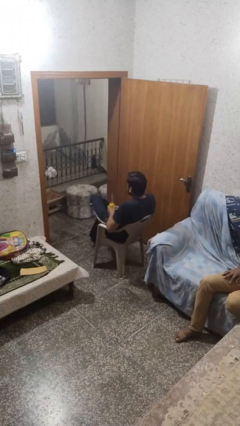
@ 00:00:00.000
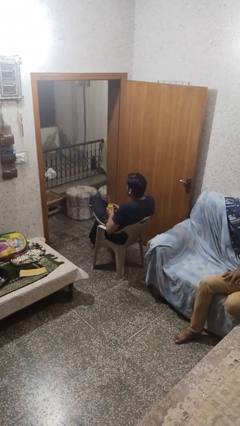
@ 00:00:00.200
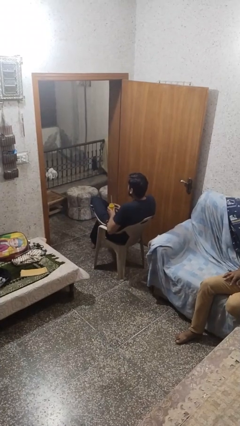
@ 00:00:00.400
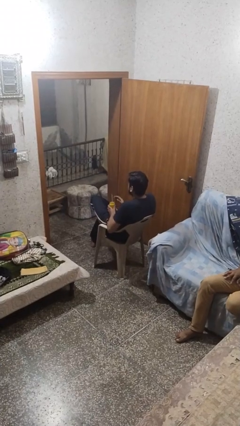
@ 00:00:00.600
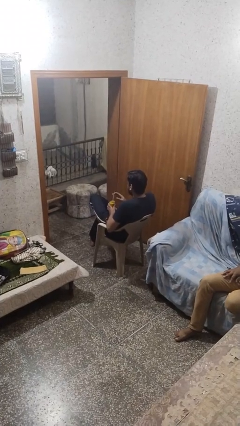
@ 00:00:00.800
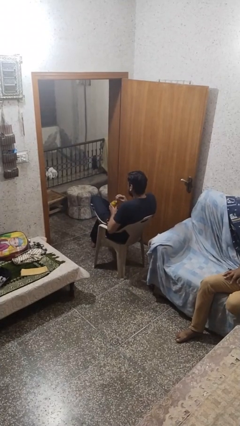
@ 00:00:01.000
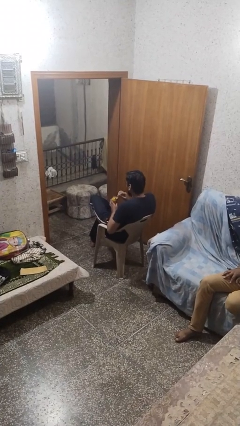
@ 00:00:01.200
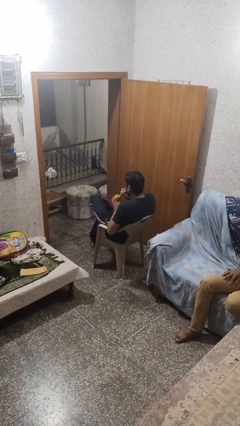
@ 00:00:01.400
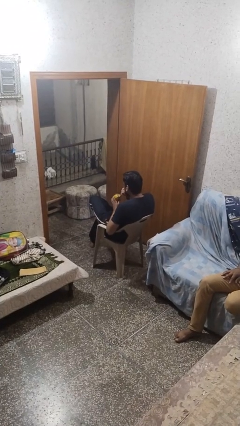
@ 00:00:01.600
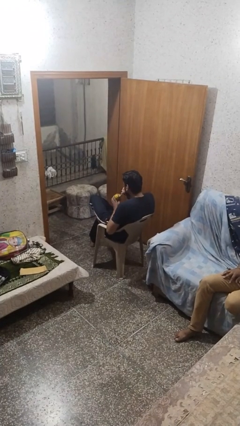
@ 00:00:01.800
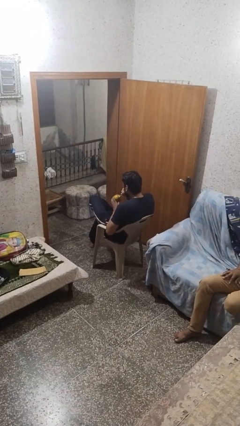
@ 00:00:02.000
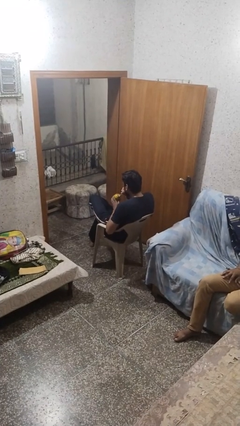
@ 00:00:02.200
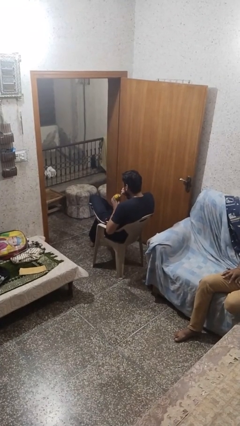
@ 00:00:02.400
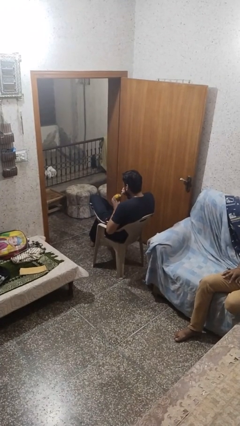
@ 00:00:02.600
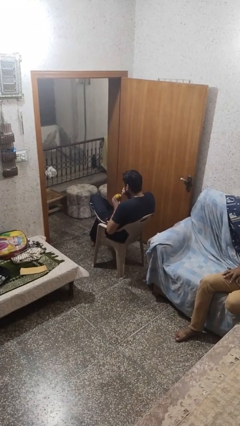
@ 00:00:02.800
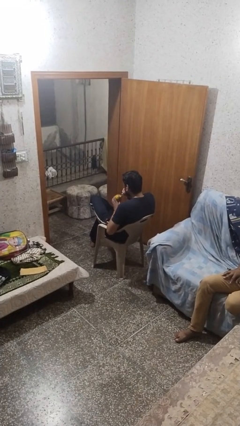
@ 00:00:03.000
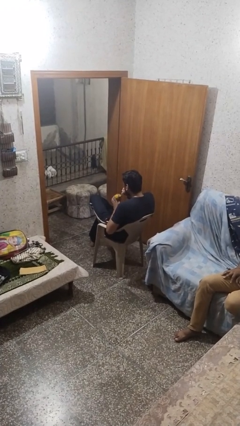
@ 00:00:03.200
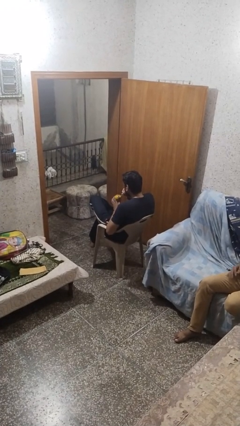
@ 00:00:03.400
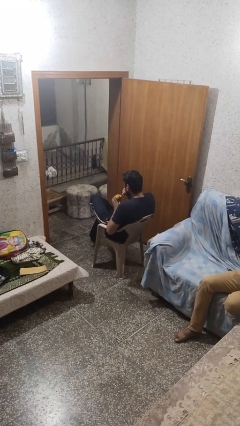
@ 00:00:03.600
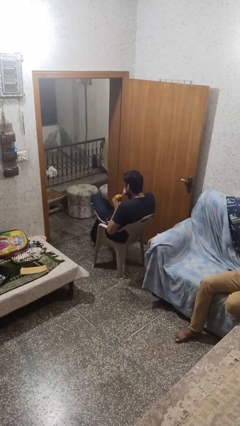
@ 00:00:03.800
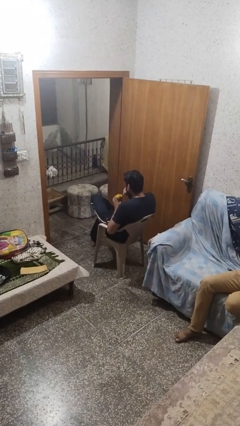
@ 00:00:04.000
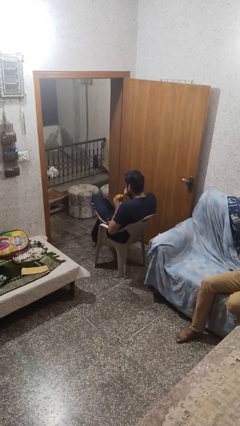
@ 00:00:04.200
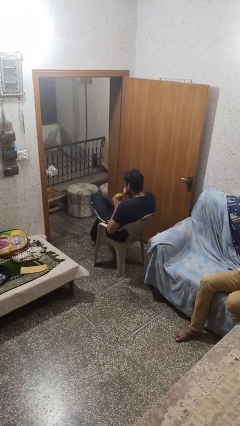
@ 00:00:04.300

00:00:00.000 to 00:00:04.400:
person drinks from straw

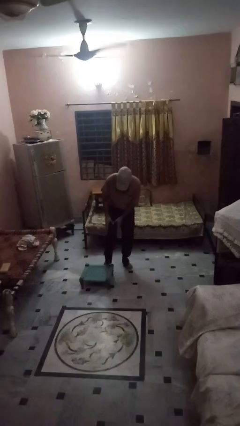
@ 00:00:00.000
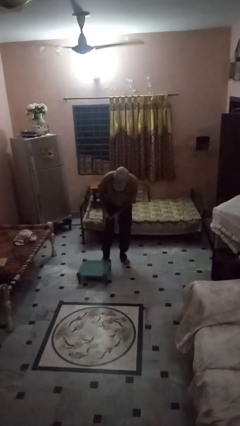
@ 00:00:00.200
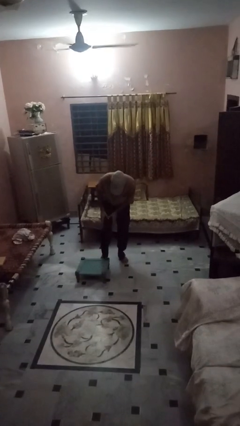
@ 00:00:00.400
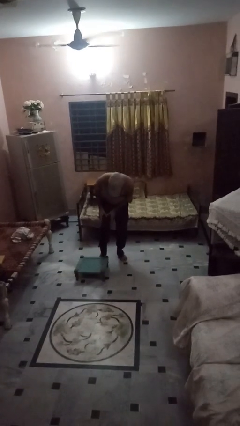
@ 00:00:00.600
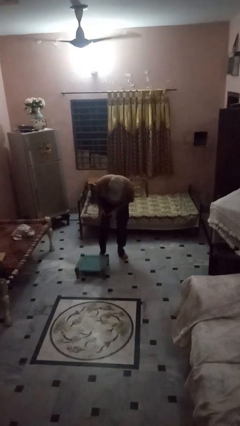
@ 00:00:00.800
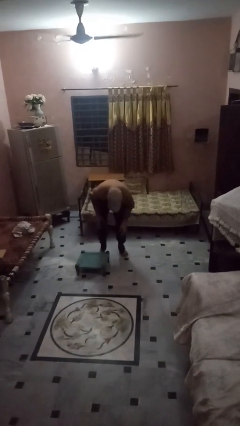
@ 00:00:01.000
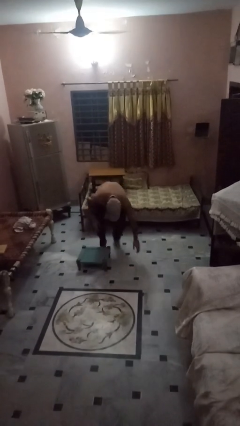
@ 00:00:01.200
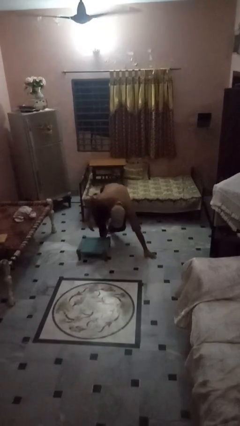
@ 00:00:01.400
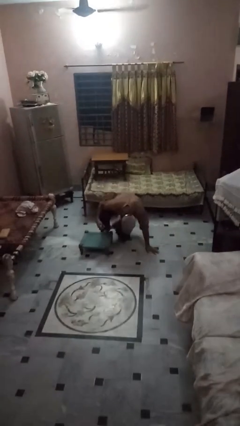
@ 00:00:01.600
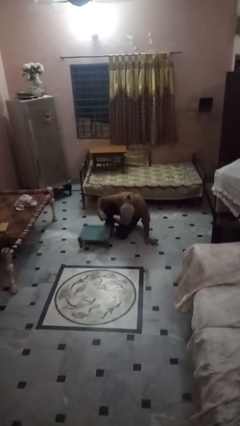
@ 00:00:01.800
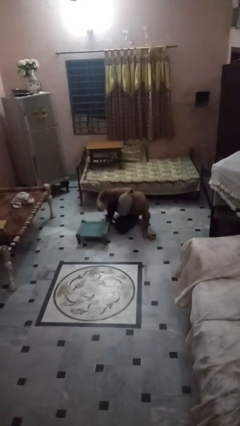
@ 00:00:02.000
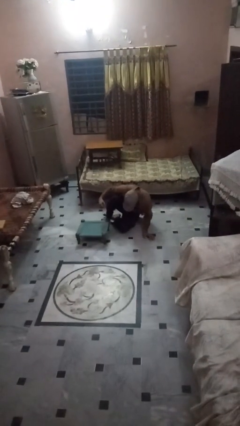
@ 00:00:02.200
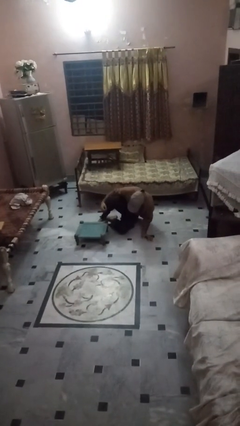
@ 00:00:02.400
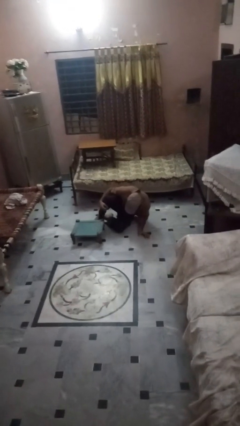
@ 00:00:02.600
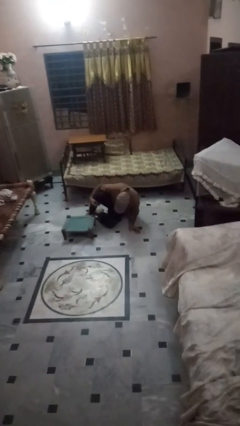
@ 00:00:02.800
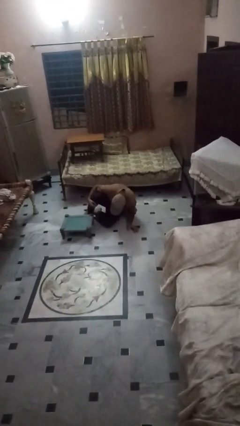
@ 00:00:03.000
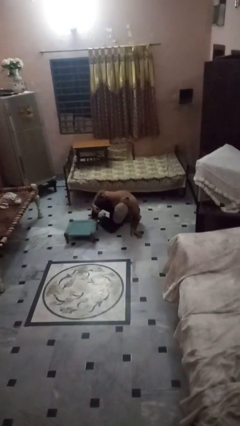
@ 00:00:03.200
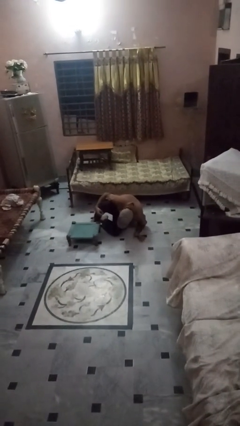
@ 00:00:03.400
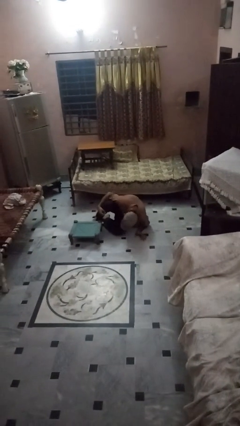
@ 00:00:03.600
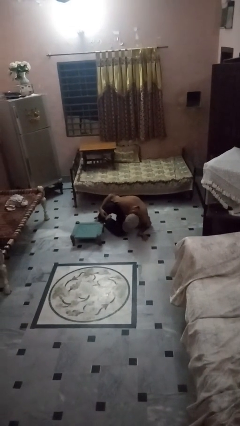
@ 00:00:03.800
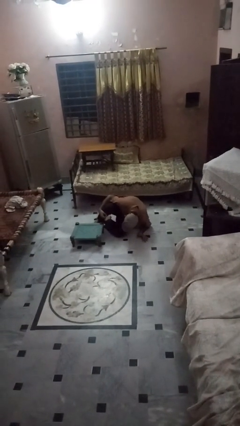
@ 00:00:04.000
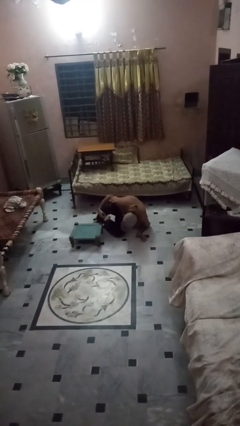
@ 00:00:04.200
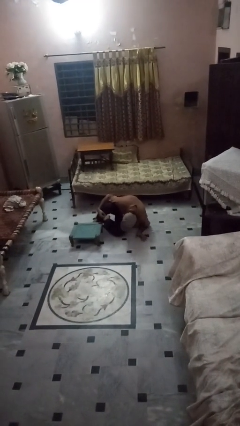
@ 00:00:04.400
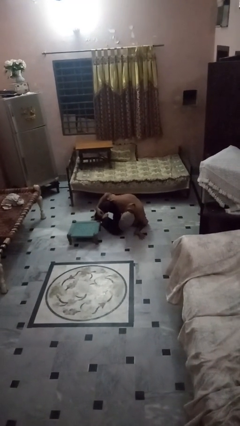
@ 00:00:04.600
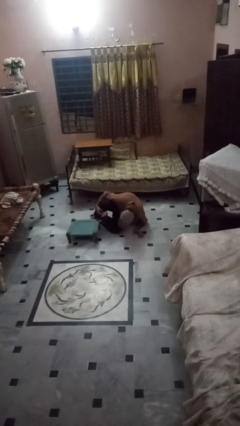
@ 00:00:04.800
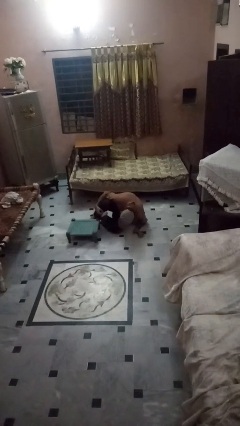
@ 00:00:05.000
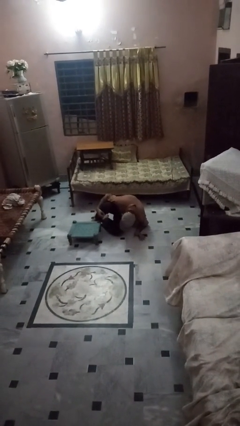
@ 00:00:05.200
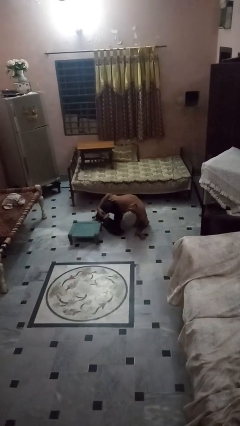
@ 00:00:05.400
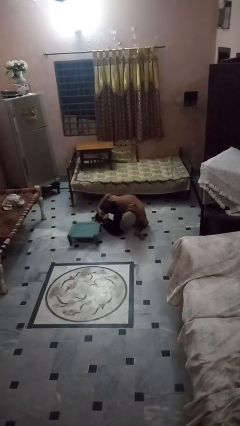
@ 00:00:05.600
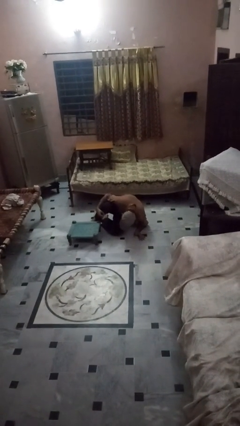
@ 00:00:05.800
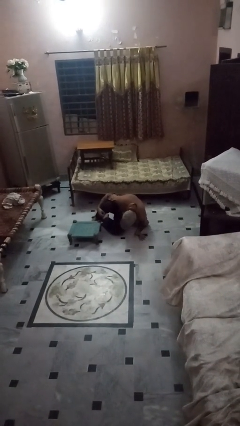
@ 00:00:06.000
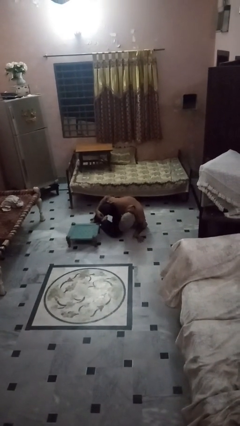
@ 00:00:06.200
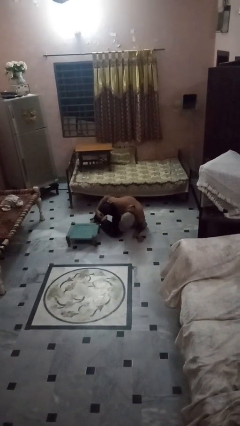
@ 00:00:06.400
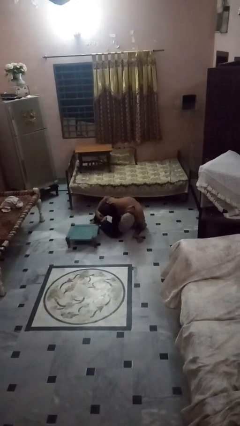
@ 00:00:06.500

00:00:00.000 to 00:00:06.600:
person lies down on floor

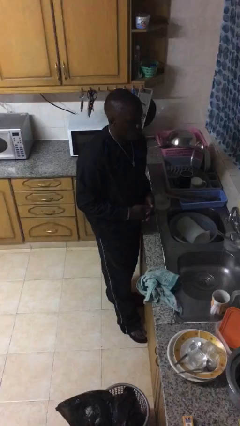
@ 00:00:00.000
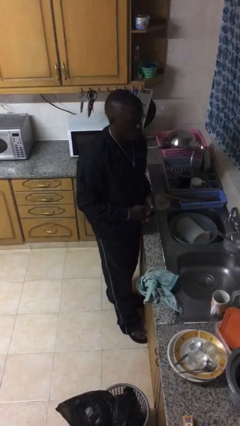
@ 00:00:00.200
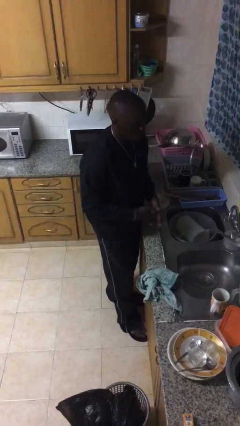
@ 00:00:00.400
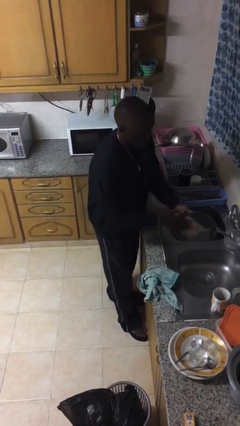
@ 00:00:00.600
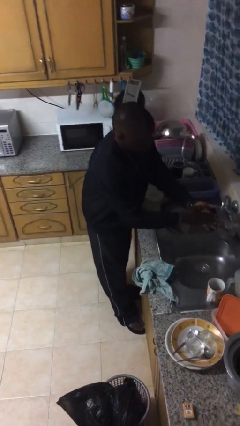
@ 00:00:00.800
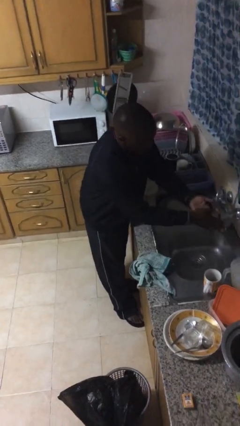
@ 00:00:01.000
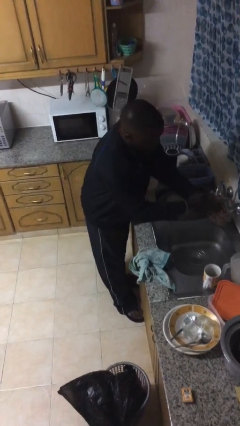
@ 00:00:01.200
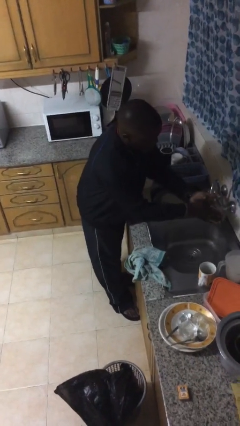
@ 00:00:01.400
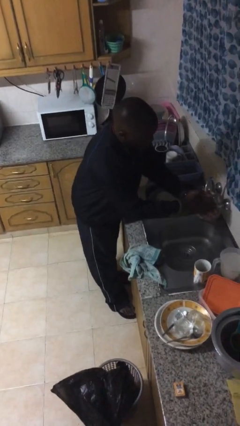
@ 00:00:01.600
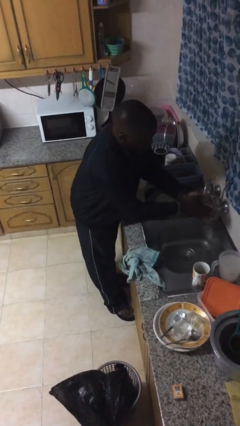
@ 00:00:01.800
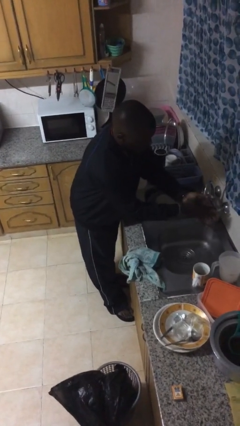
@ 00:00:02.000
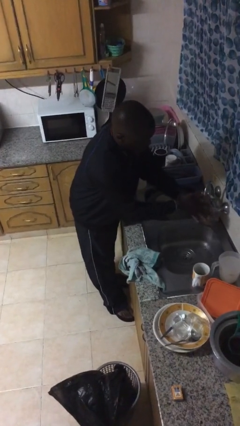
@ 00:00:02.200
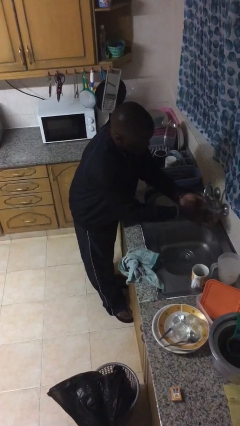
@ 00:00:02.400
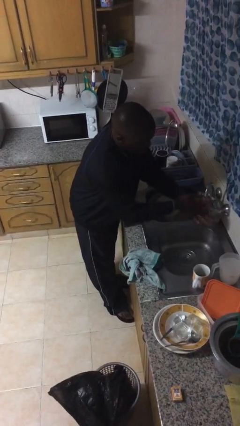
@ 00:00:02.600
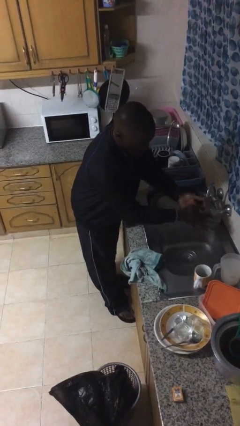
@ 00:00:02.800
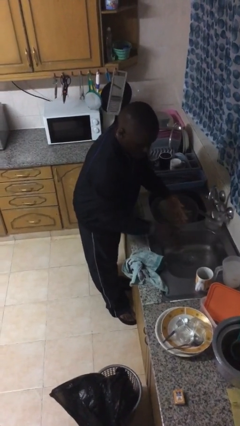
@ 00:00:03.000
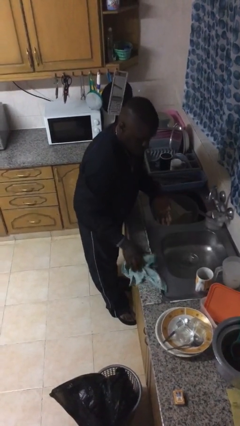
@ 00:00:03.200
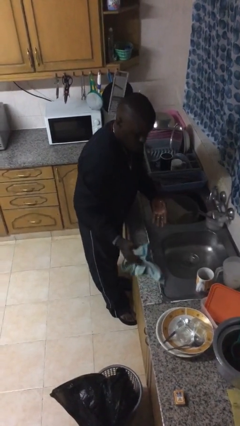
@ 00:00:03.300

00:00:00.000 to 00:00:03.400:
person washes hands

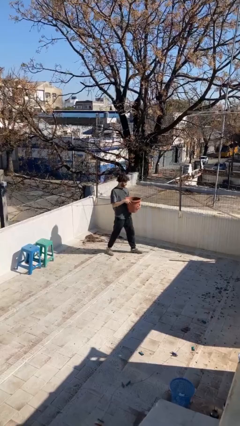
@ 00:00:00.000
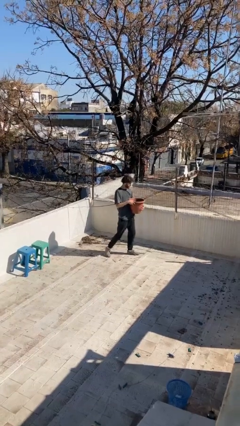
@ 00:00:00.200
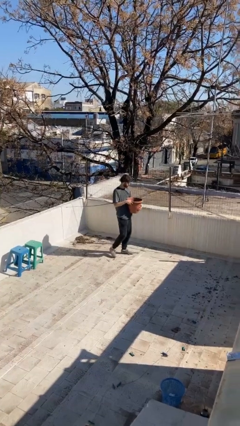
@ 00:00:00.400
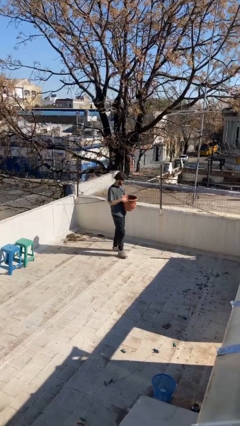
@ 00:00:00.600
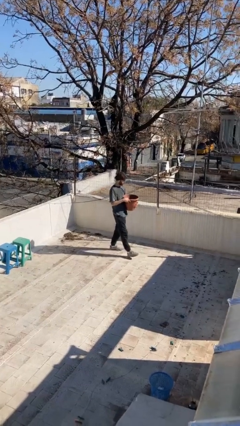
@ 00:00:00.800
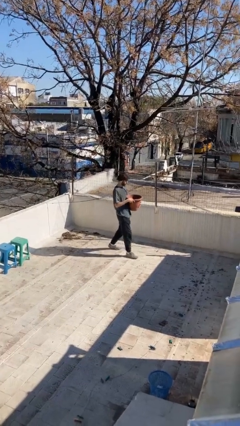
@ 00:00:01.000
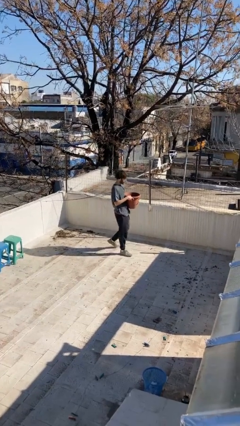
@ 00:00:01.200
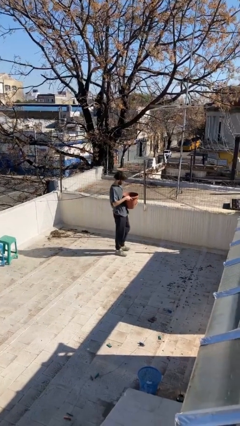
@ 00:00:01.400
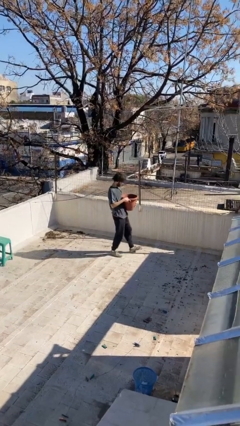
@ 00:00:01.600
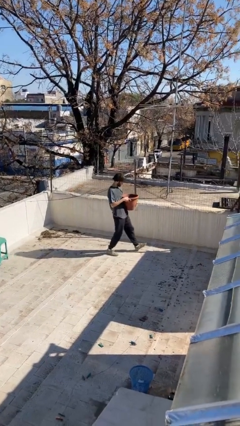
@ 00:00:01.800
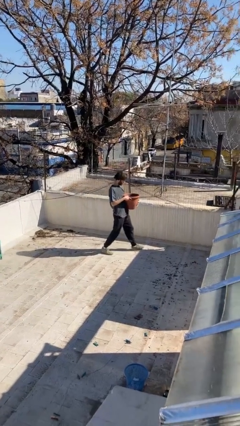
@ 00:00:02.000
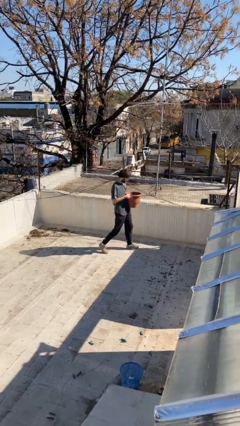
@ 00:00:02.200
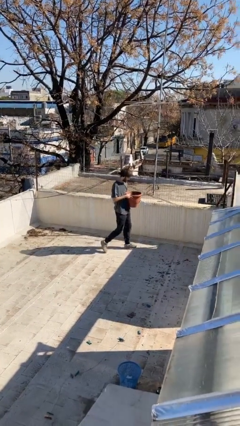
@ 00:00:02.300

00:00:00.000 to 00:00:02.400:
person carries heavy object

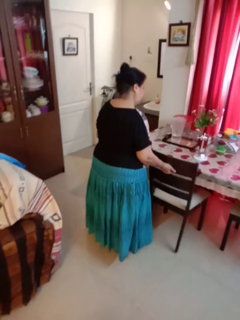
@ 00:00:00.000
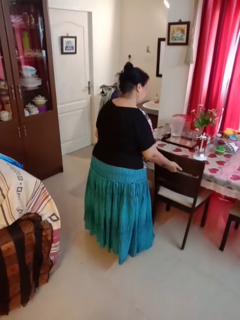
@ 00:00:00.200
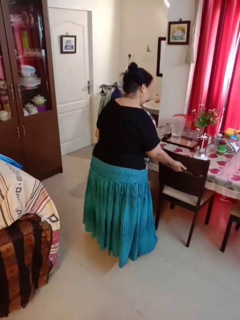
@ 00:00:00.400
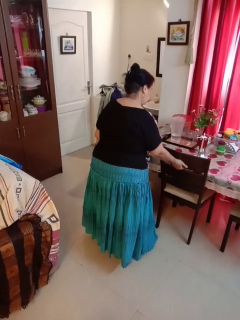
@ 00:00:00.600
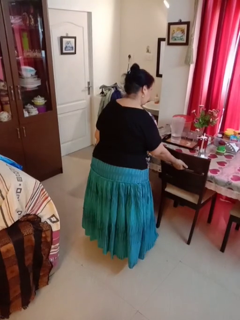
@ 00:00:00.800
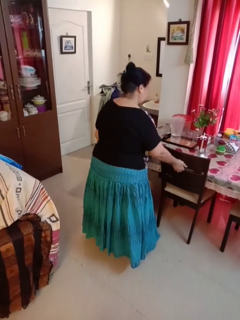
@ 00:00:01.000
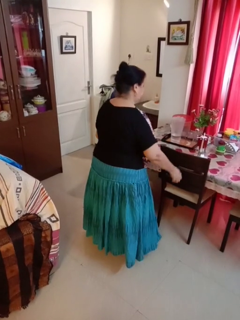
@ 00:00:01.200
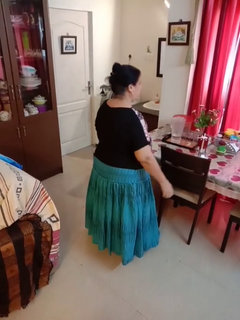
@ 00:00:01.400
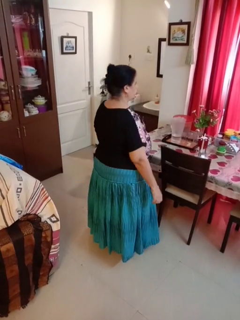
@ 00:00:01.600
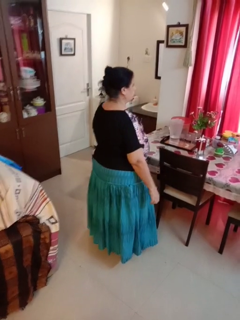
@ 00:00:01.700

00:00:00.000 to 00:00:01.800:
person pushes in chair
